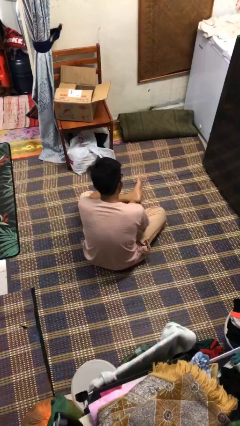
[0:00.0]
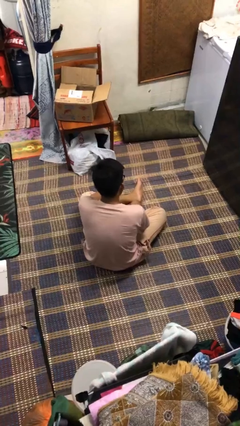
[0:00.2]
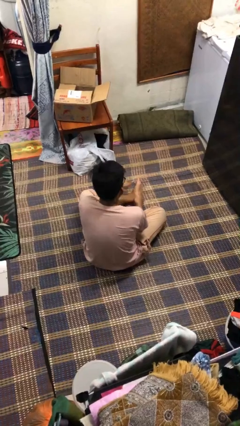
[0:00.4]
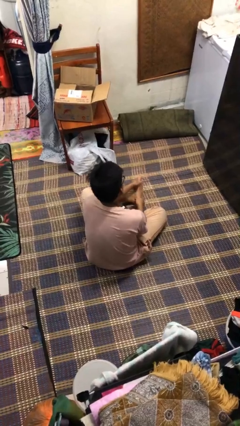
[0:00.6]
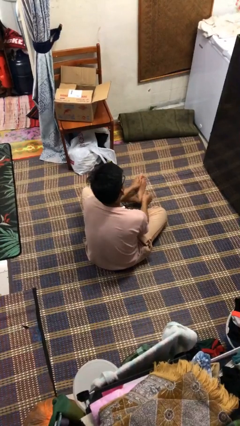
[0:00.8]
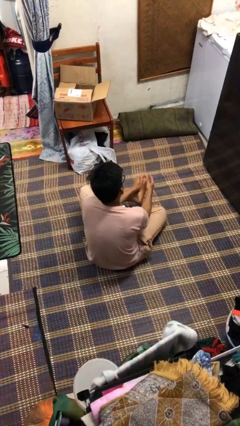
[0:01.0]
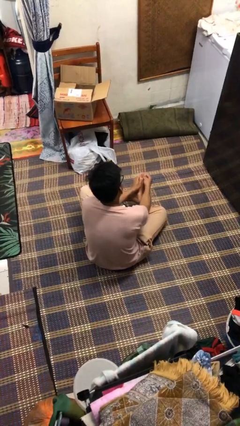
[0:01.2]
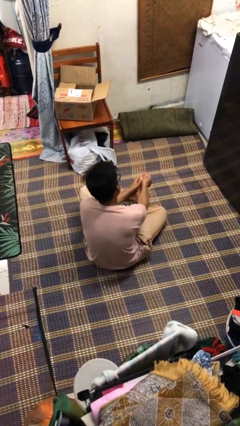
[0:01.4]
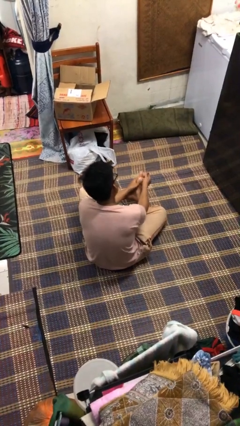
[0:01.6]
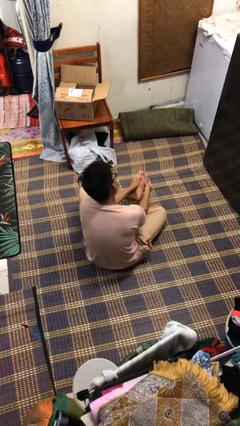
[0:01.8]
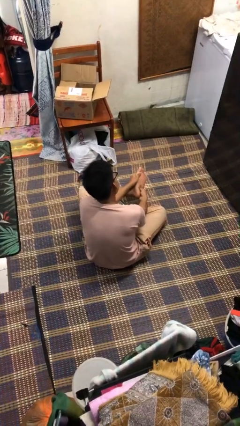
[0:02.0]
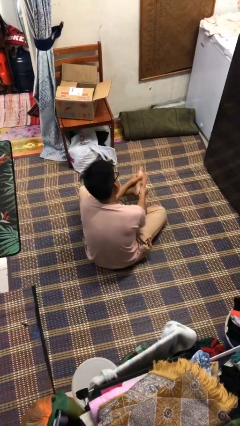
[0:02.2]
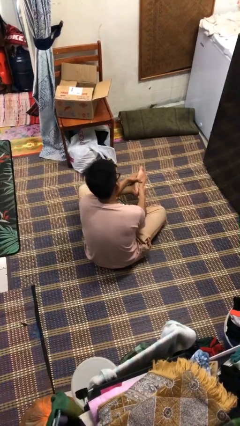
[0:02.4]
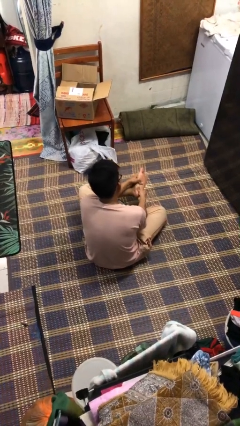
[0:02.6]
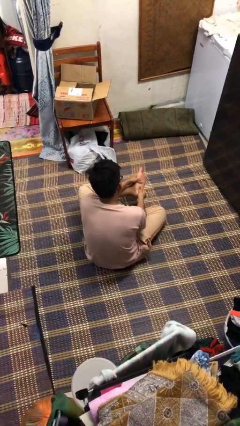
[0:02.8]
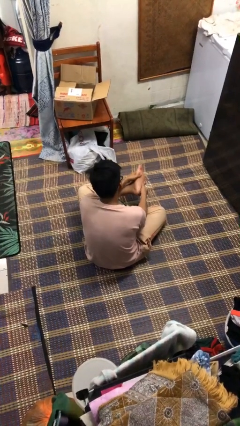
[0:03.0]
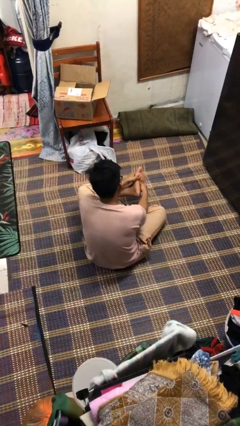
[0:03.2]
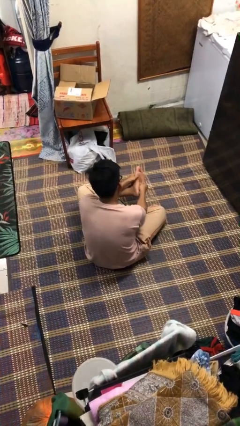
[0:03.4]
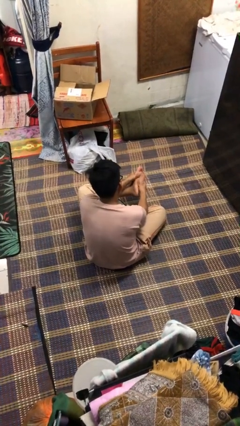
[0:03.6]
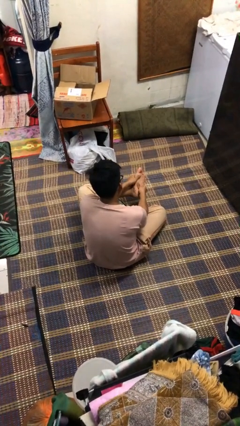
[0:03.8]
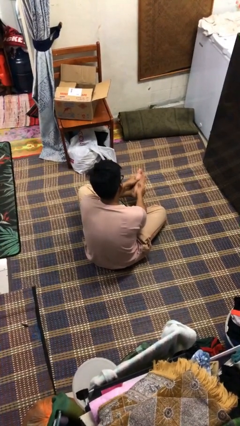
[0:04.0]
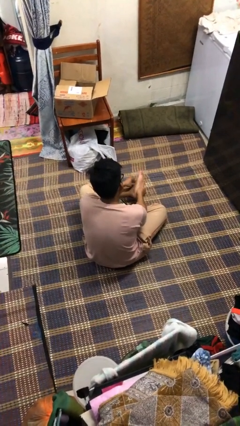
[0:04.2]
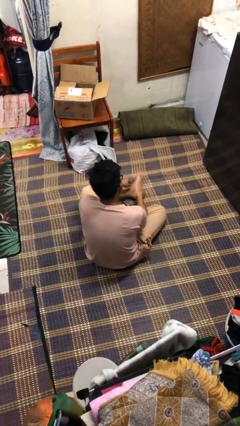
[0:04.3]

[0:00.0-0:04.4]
person rubs foot

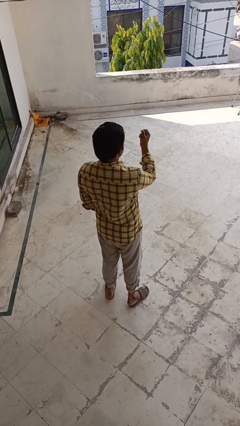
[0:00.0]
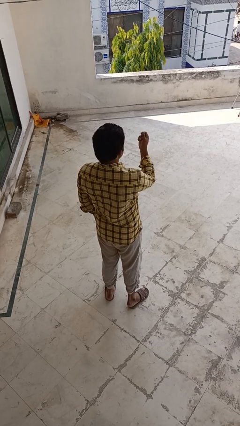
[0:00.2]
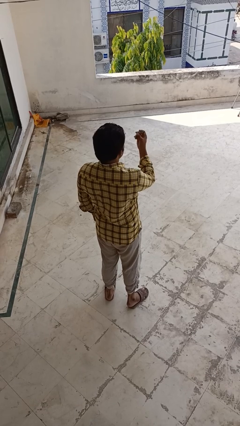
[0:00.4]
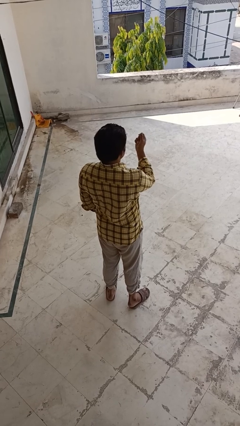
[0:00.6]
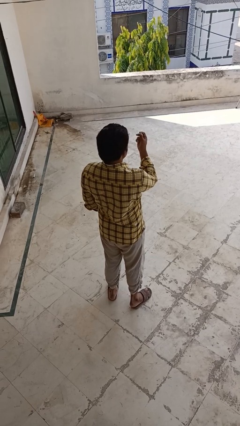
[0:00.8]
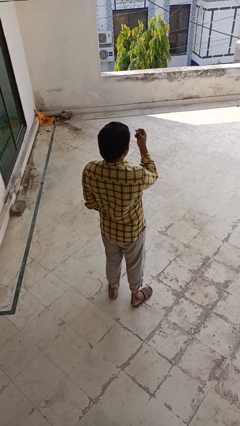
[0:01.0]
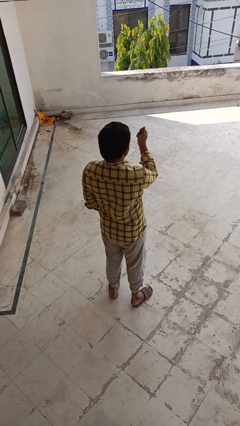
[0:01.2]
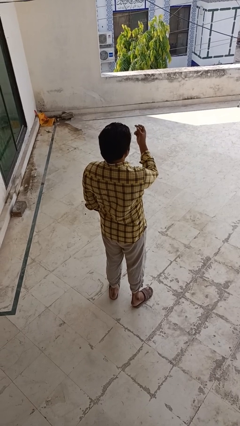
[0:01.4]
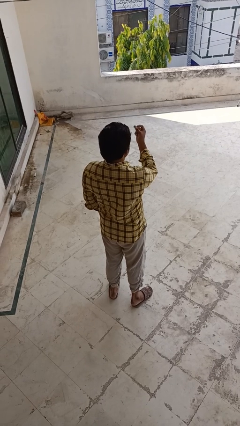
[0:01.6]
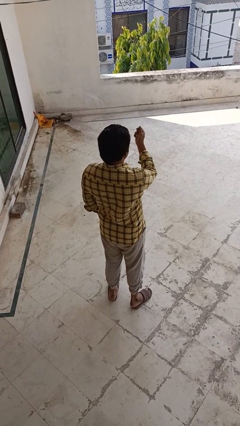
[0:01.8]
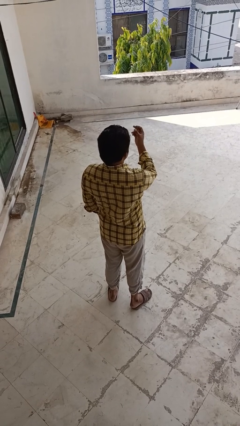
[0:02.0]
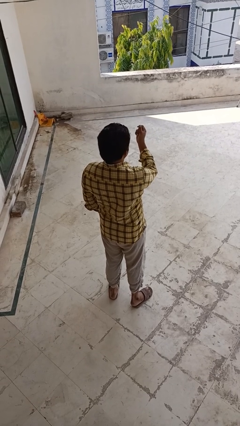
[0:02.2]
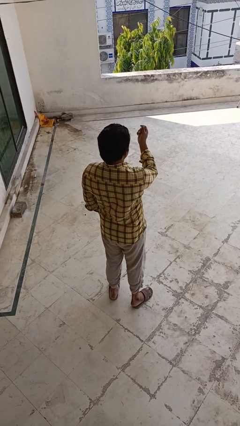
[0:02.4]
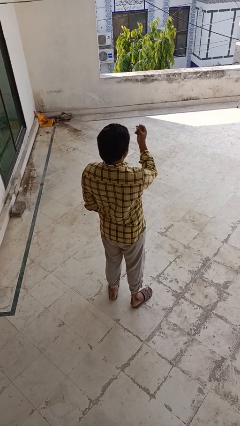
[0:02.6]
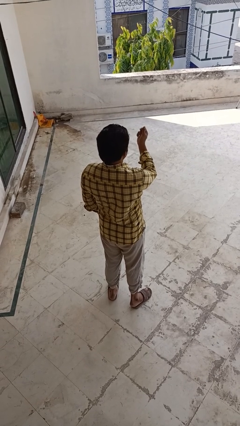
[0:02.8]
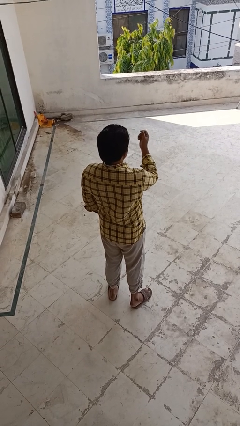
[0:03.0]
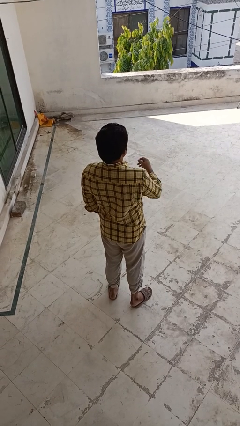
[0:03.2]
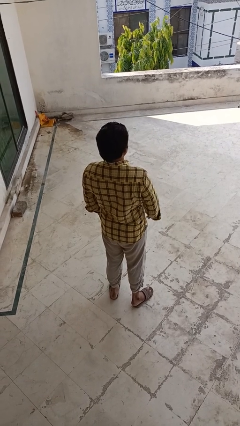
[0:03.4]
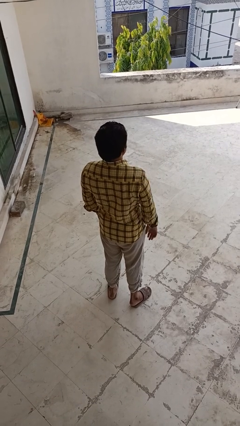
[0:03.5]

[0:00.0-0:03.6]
person snaps fingers

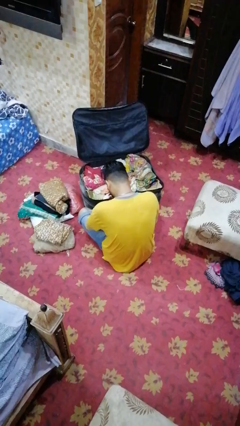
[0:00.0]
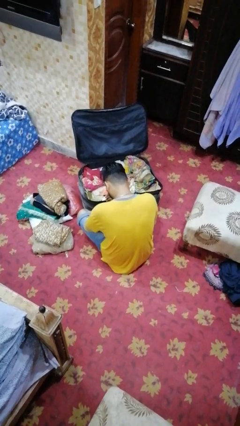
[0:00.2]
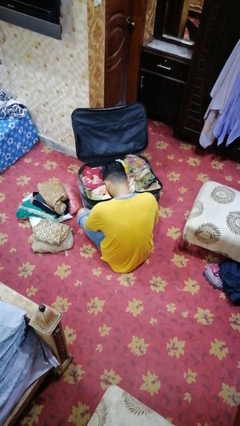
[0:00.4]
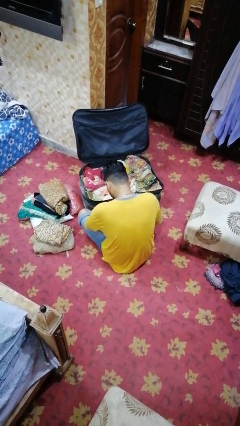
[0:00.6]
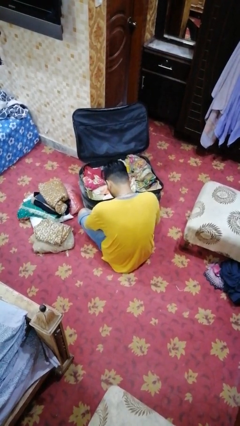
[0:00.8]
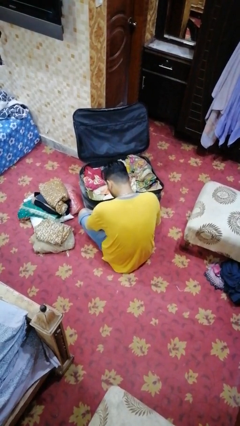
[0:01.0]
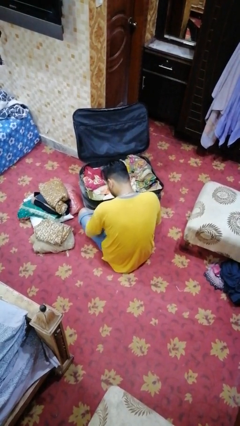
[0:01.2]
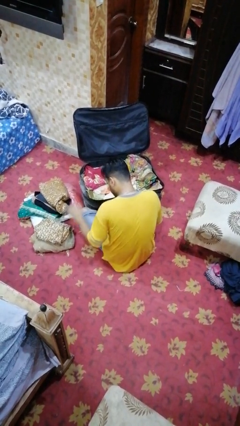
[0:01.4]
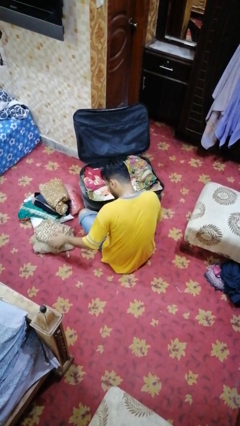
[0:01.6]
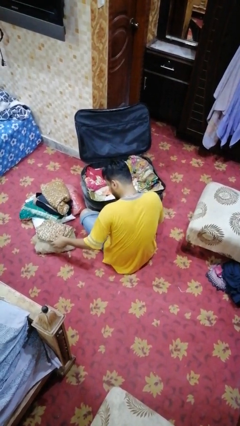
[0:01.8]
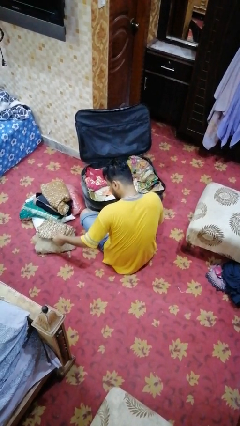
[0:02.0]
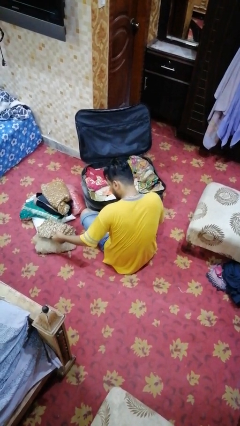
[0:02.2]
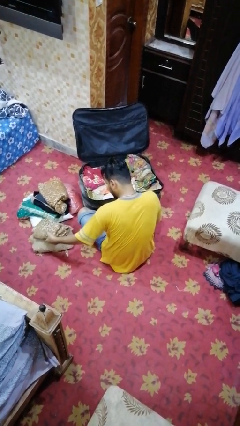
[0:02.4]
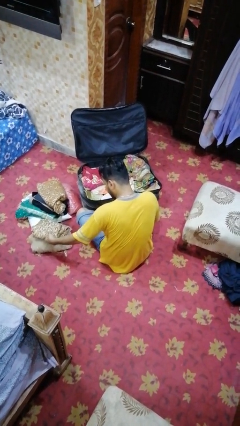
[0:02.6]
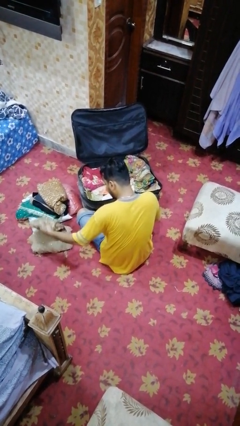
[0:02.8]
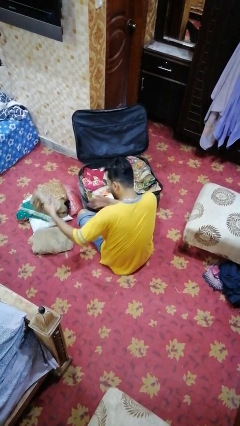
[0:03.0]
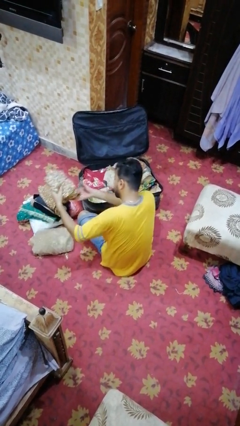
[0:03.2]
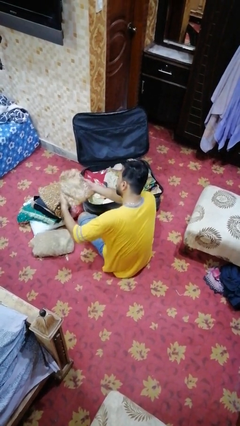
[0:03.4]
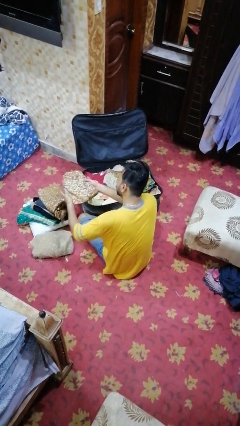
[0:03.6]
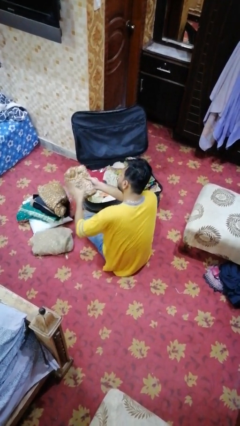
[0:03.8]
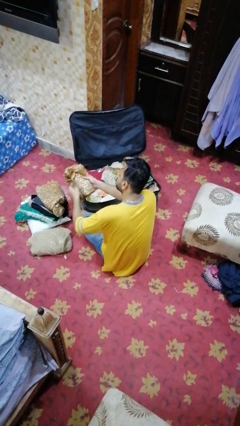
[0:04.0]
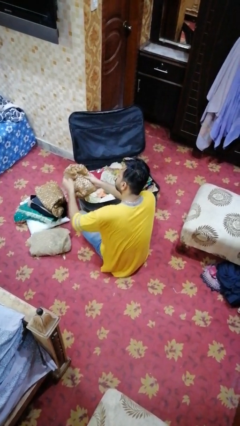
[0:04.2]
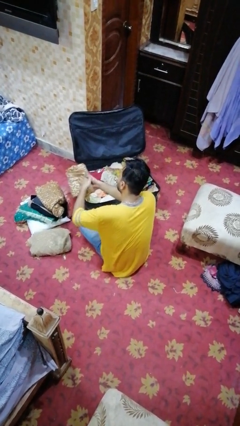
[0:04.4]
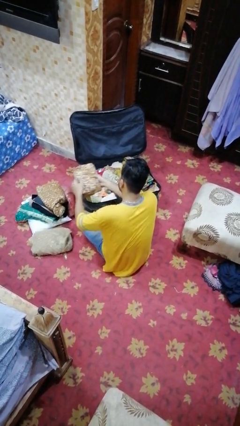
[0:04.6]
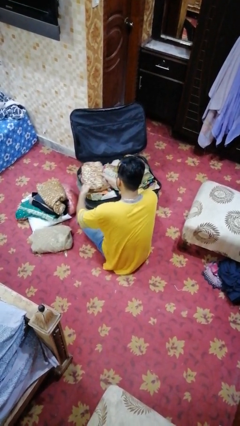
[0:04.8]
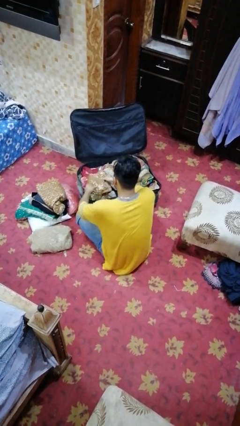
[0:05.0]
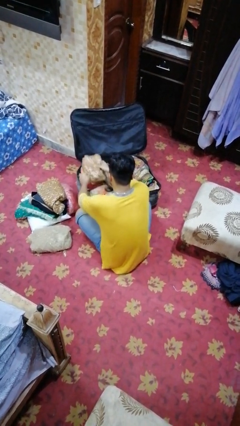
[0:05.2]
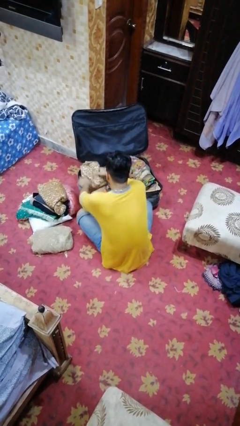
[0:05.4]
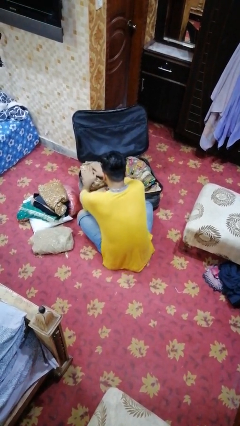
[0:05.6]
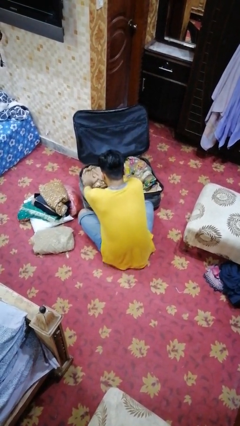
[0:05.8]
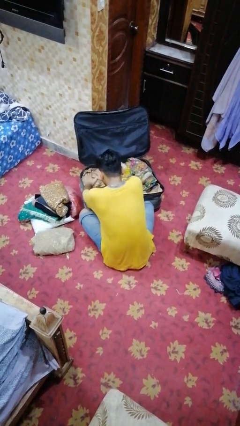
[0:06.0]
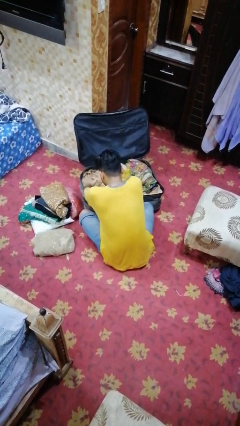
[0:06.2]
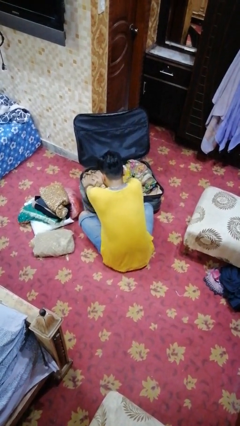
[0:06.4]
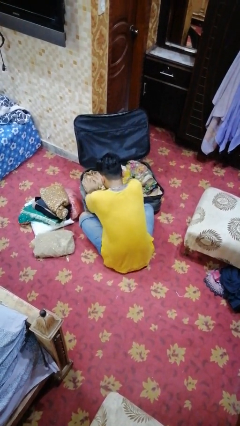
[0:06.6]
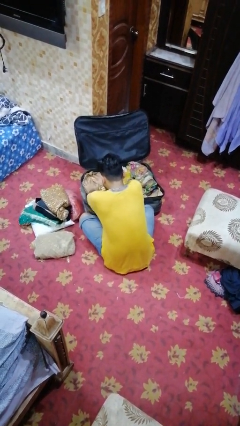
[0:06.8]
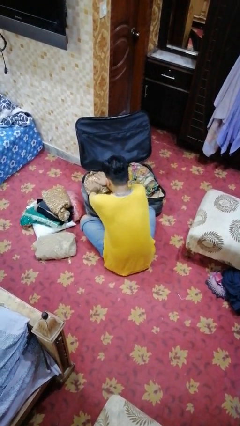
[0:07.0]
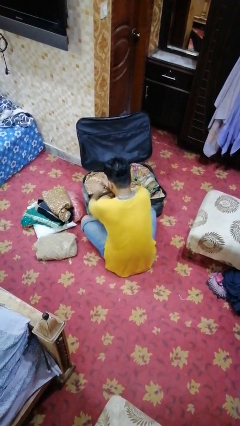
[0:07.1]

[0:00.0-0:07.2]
person loads clothes into suitcase

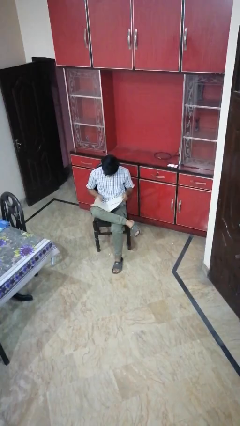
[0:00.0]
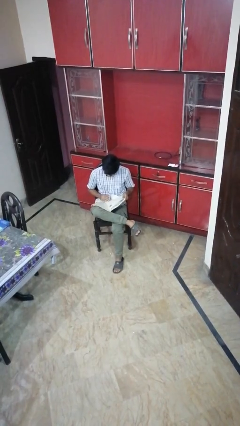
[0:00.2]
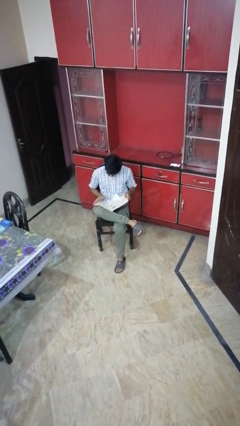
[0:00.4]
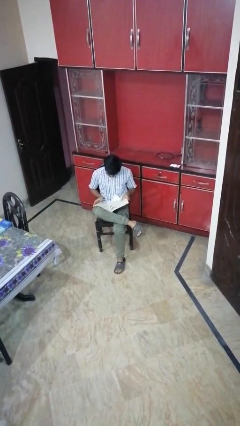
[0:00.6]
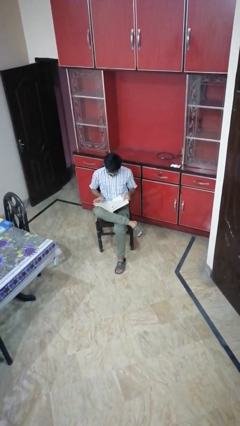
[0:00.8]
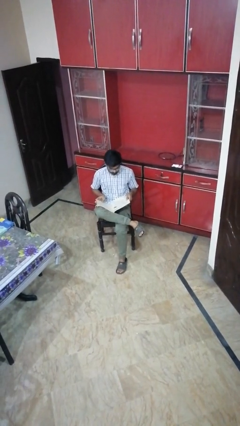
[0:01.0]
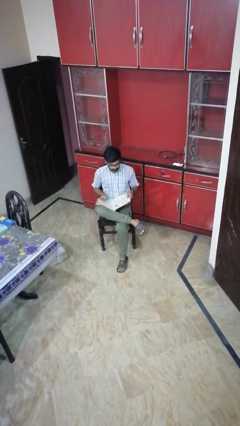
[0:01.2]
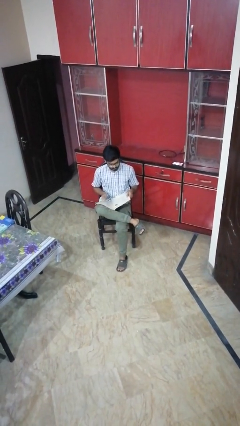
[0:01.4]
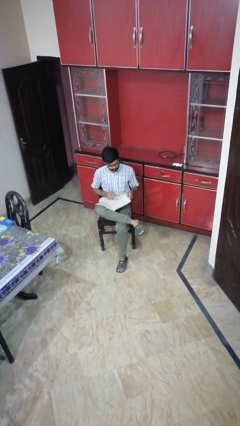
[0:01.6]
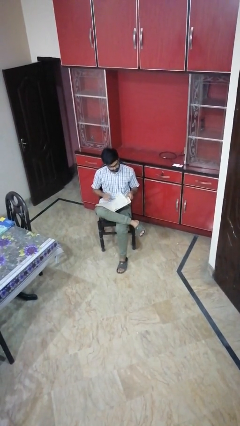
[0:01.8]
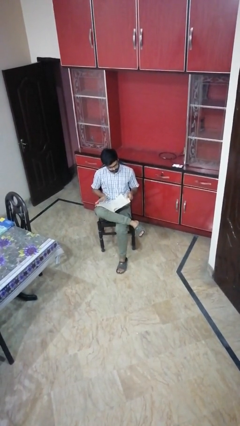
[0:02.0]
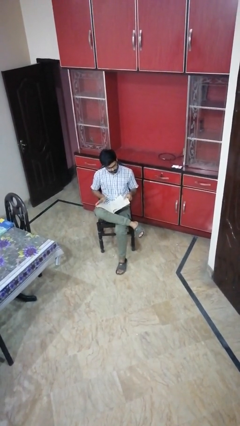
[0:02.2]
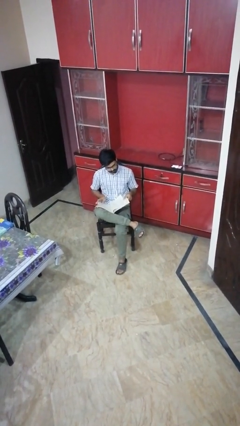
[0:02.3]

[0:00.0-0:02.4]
person exercises with situp
